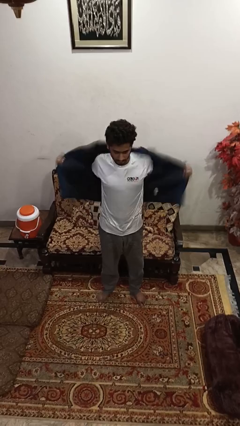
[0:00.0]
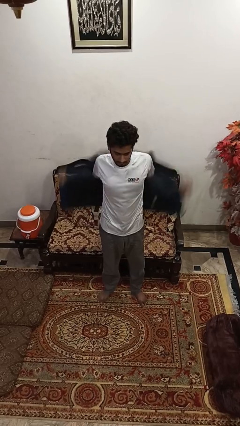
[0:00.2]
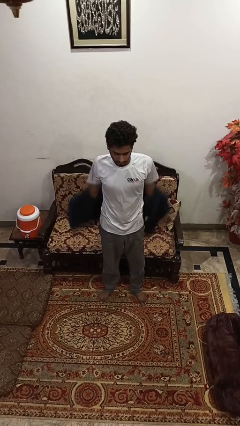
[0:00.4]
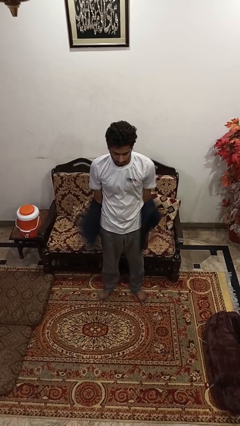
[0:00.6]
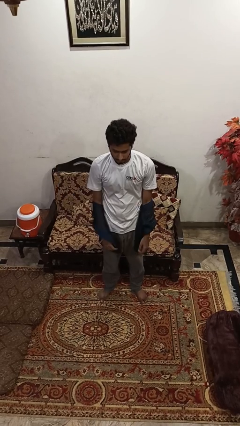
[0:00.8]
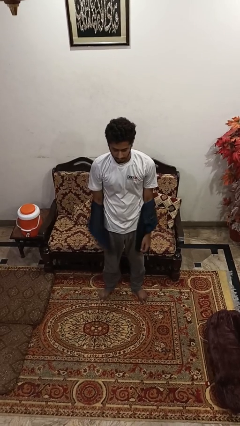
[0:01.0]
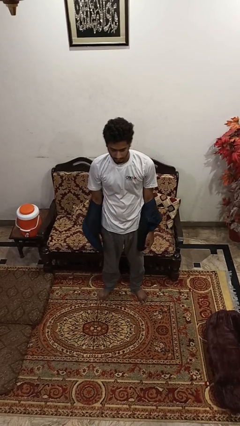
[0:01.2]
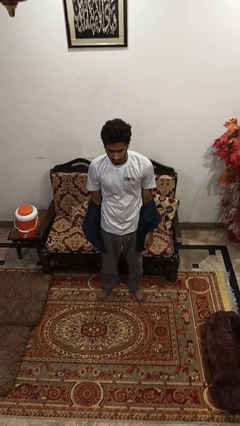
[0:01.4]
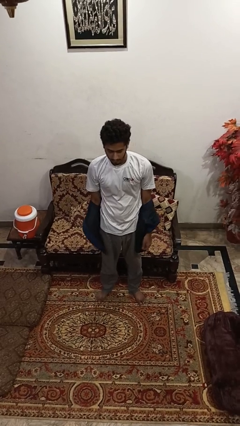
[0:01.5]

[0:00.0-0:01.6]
person takes off jacket

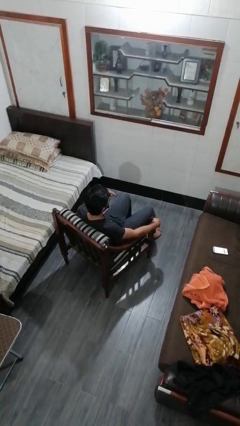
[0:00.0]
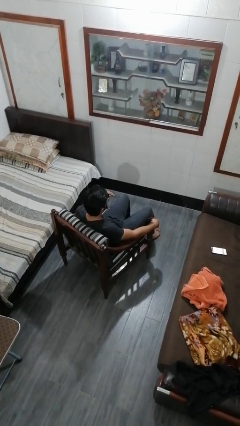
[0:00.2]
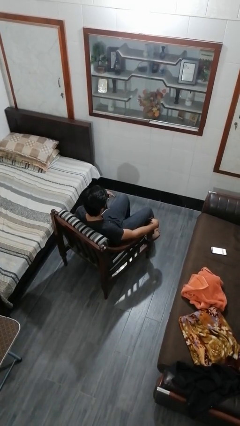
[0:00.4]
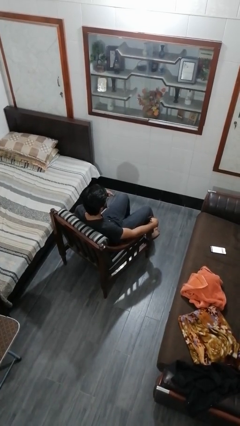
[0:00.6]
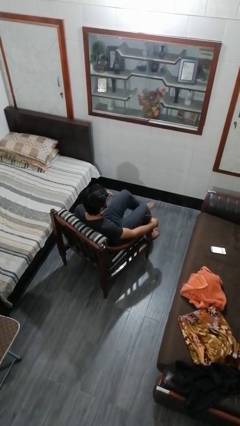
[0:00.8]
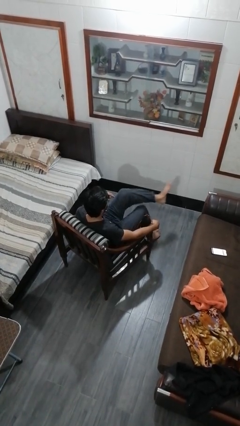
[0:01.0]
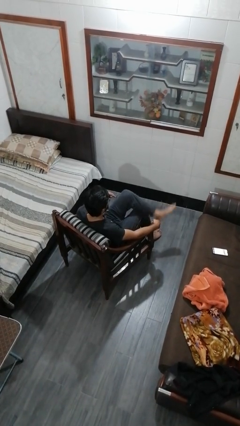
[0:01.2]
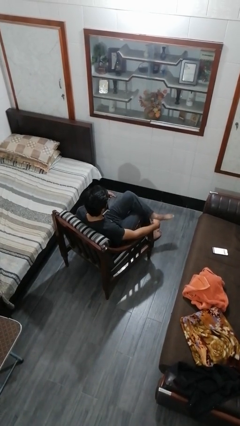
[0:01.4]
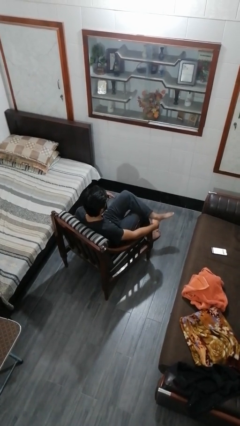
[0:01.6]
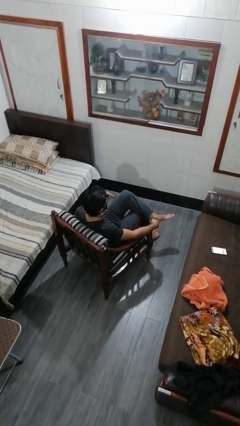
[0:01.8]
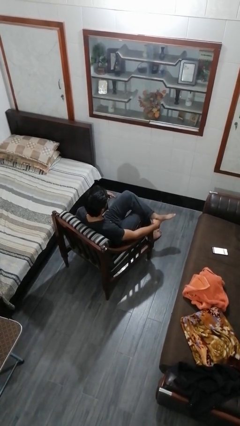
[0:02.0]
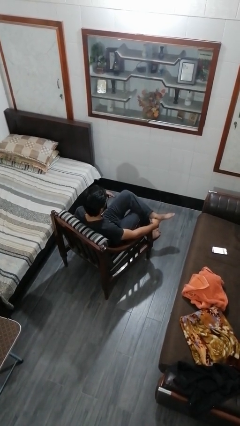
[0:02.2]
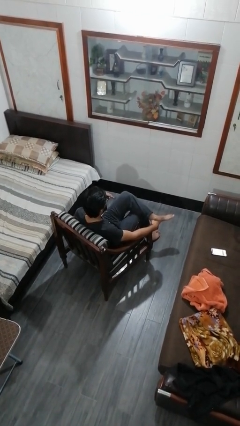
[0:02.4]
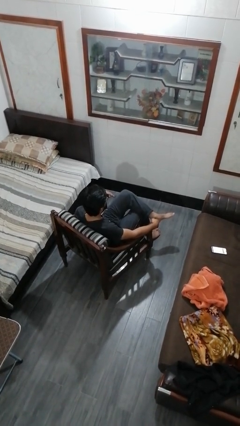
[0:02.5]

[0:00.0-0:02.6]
person crosses legs

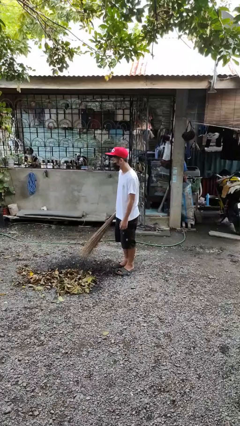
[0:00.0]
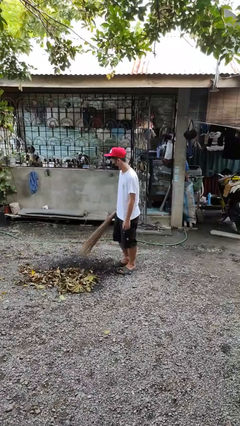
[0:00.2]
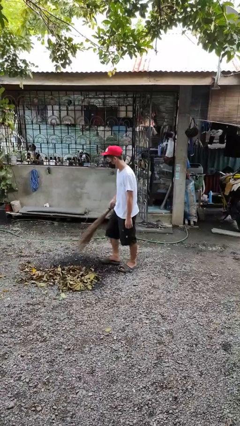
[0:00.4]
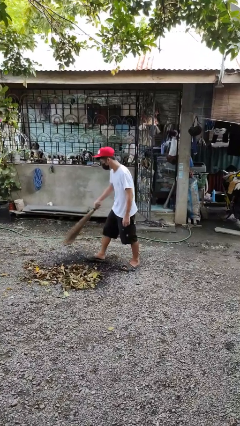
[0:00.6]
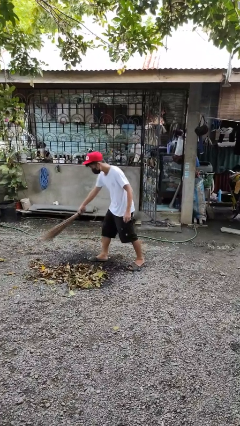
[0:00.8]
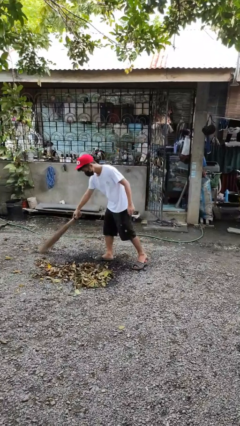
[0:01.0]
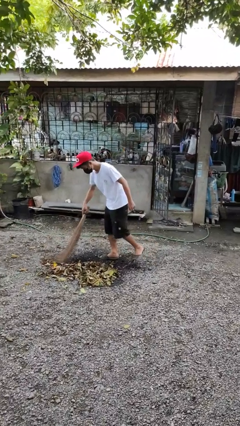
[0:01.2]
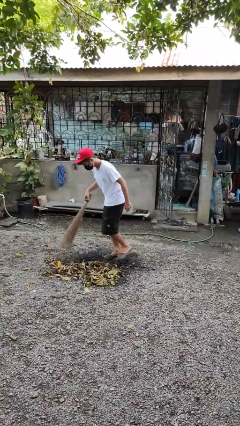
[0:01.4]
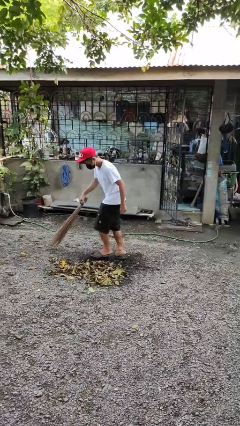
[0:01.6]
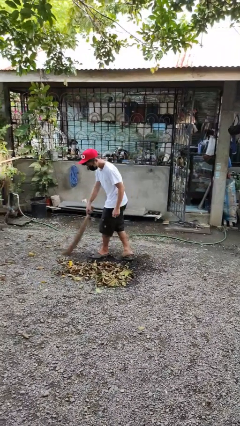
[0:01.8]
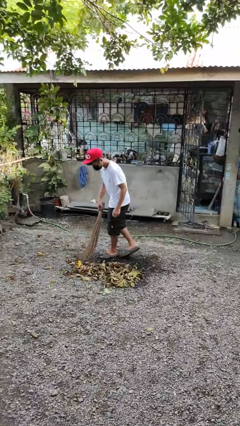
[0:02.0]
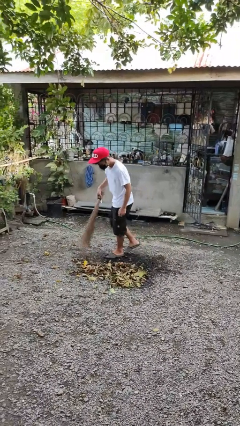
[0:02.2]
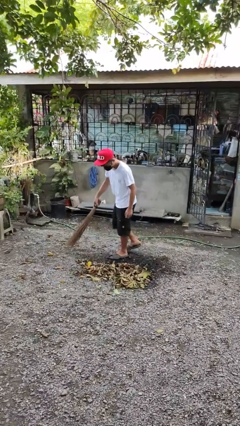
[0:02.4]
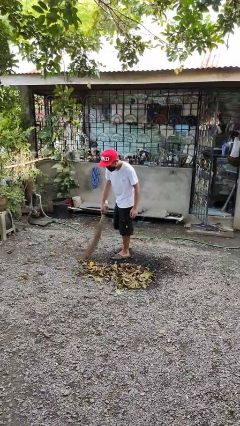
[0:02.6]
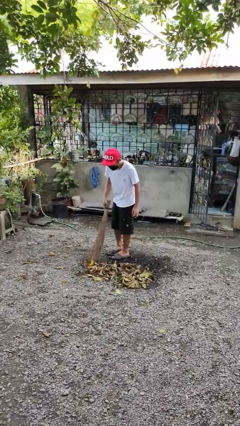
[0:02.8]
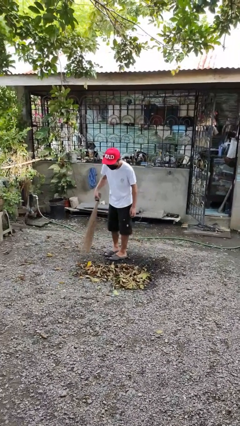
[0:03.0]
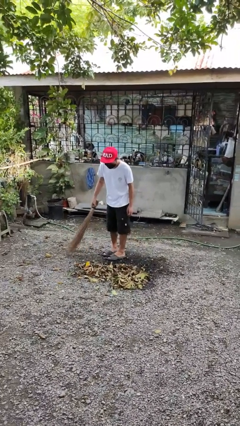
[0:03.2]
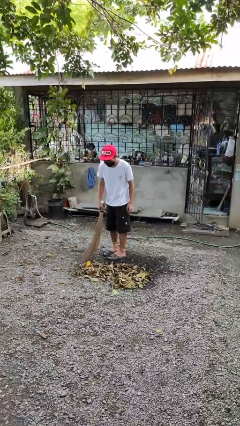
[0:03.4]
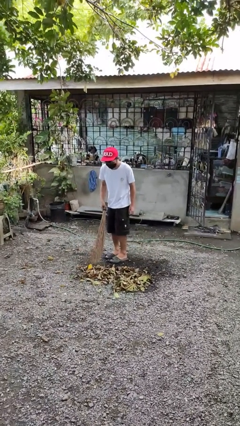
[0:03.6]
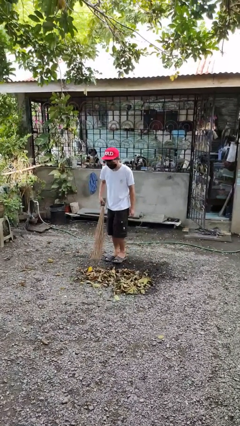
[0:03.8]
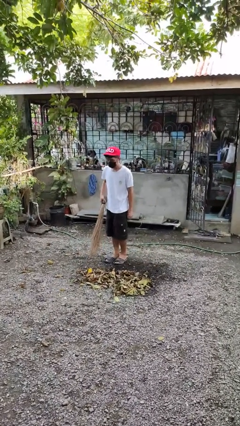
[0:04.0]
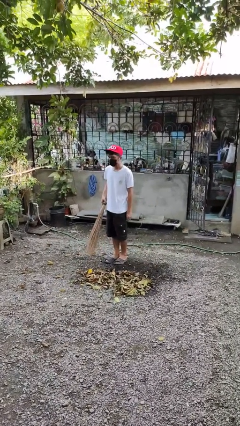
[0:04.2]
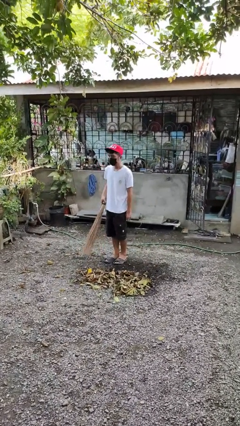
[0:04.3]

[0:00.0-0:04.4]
person sweeps floor

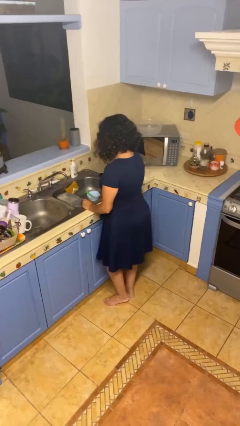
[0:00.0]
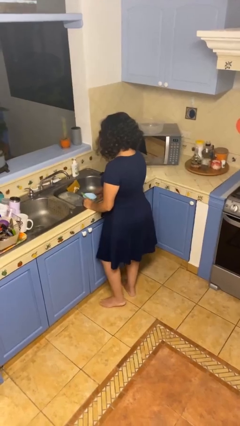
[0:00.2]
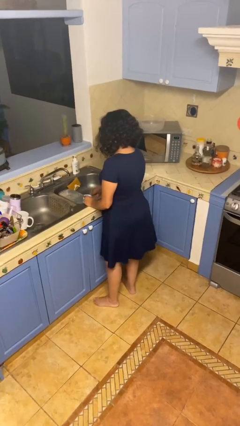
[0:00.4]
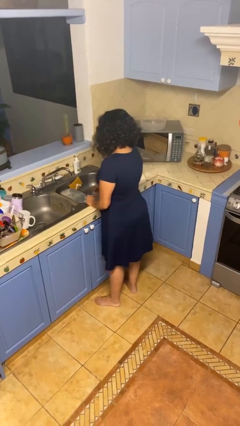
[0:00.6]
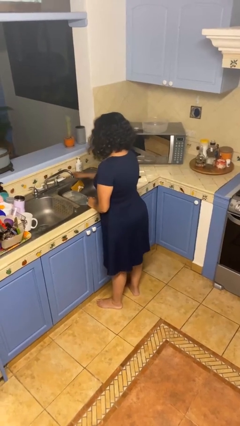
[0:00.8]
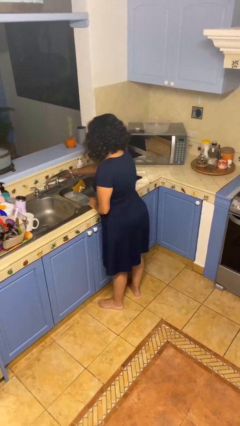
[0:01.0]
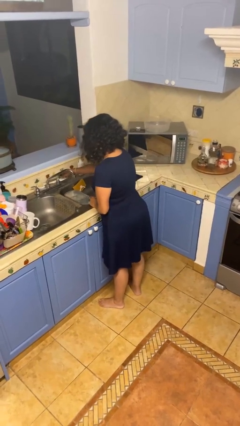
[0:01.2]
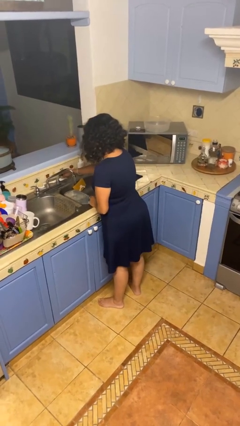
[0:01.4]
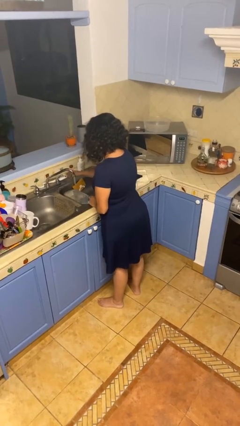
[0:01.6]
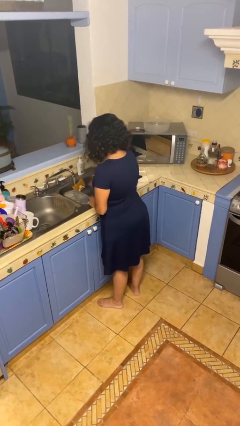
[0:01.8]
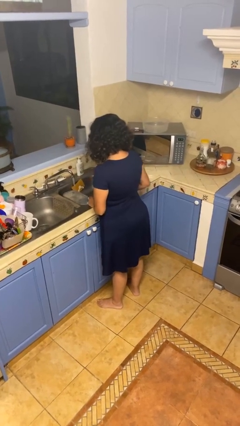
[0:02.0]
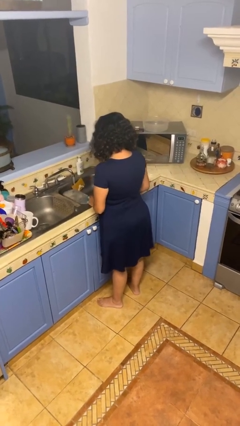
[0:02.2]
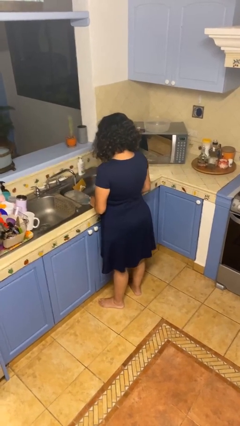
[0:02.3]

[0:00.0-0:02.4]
person turns on faucet

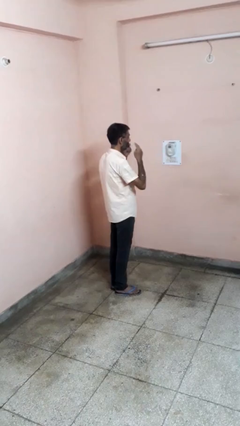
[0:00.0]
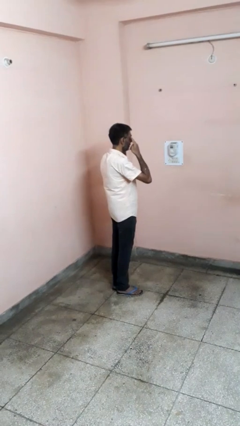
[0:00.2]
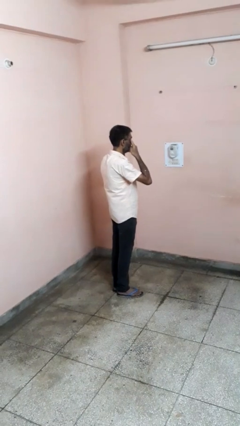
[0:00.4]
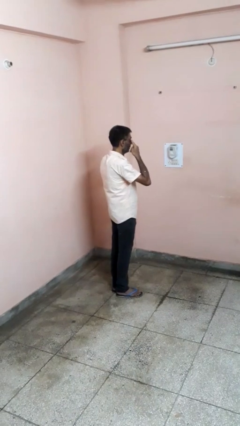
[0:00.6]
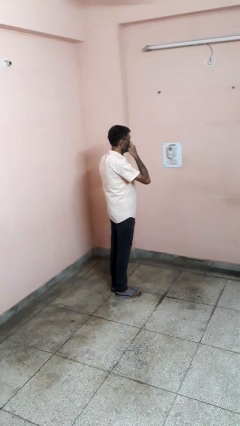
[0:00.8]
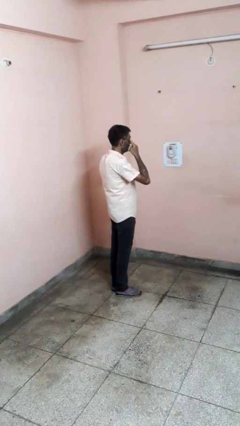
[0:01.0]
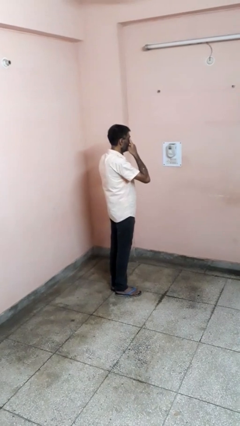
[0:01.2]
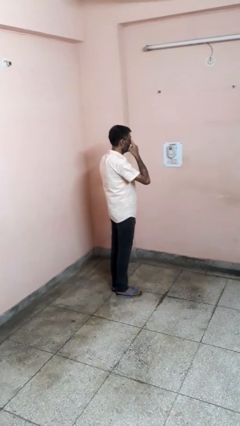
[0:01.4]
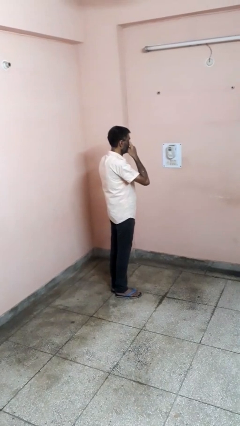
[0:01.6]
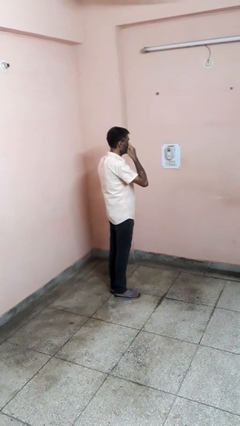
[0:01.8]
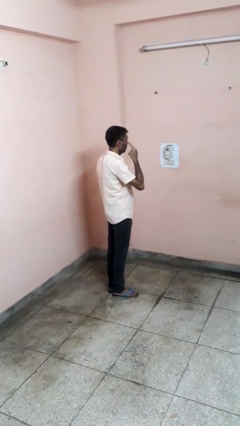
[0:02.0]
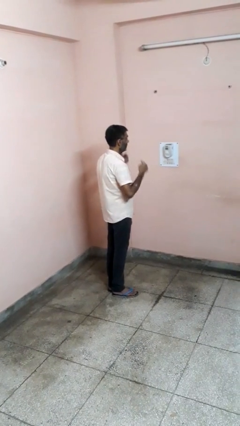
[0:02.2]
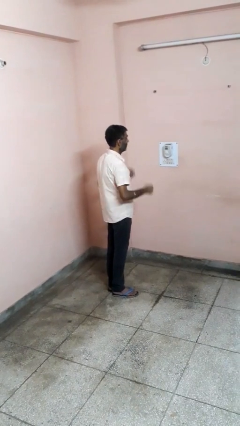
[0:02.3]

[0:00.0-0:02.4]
person rubs eyes

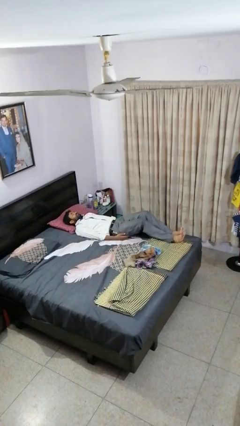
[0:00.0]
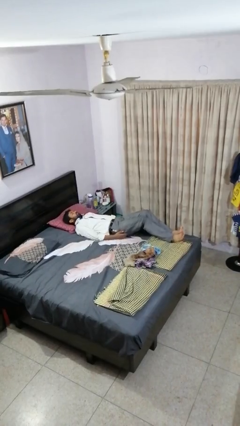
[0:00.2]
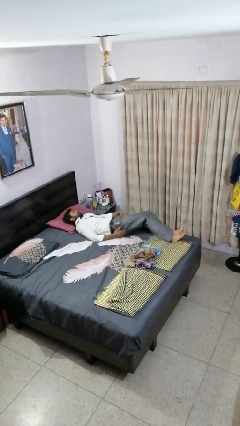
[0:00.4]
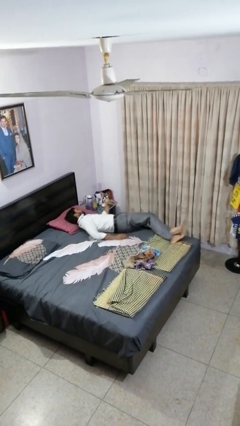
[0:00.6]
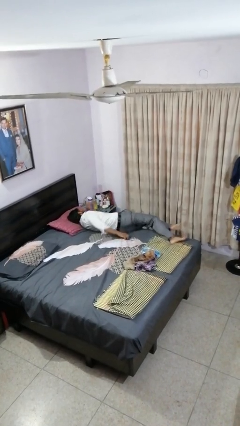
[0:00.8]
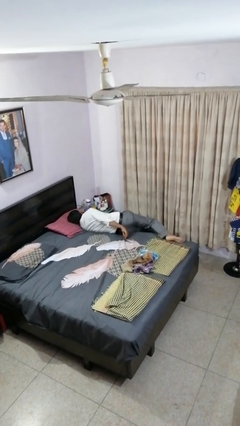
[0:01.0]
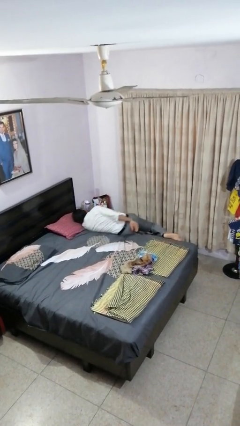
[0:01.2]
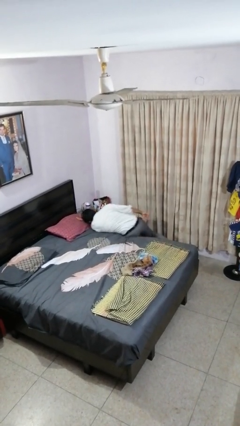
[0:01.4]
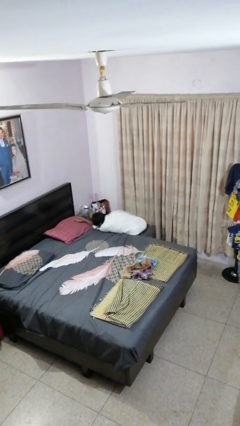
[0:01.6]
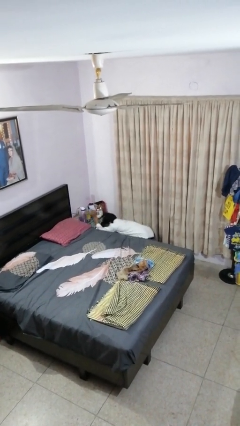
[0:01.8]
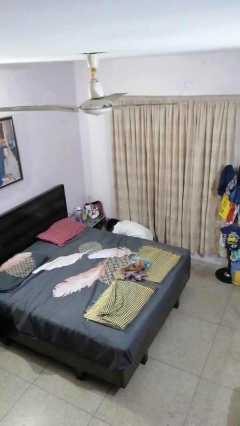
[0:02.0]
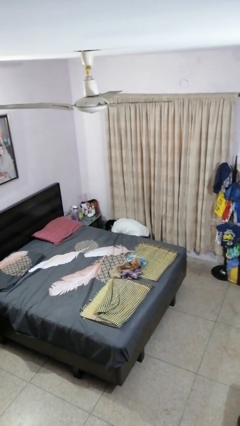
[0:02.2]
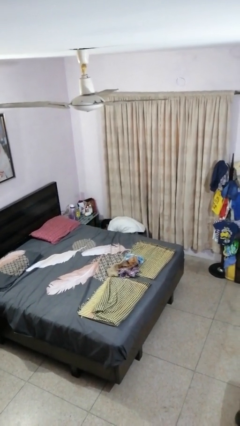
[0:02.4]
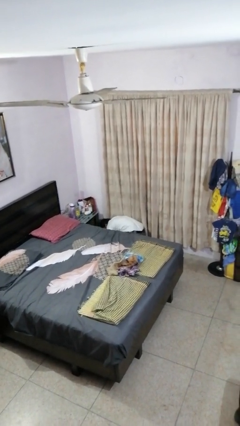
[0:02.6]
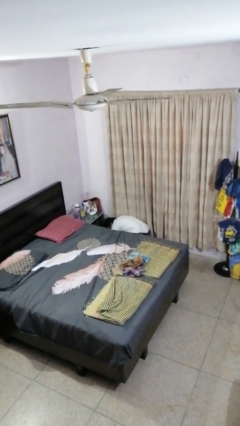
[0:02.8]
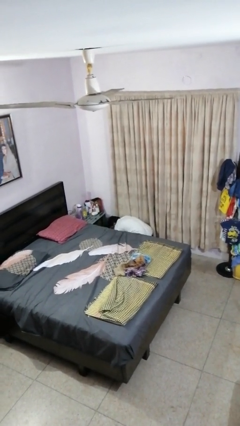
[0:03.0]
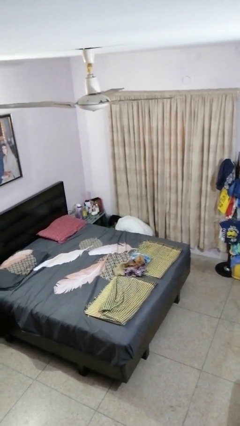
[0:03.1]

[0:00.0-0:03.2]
person falls from bed

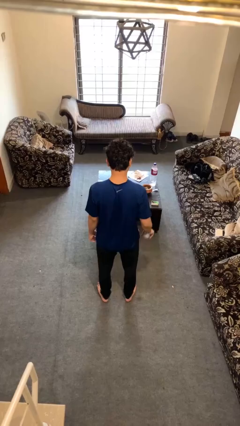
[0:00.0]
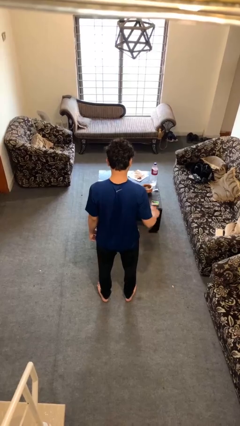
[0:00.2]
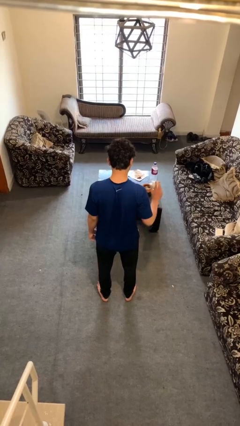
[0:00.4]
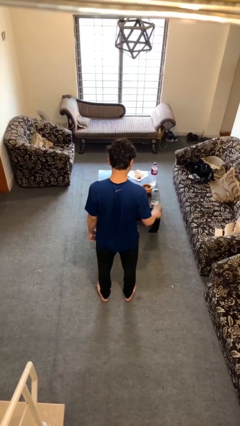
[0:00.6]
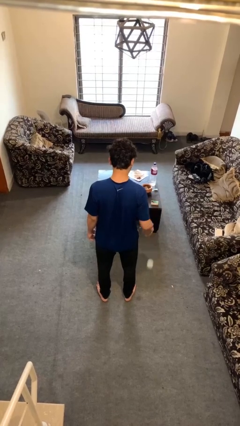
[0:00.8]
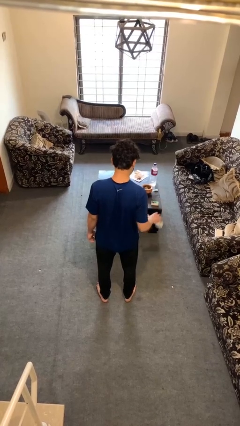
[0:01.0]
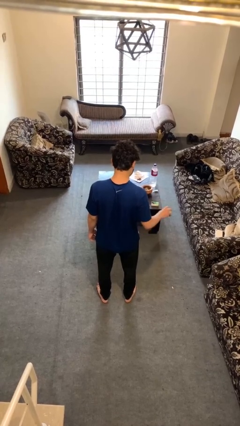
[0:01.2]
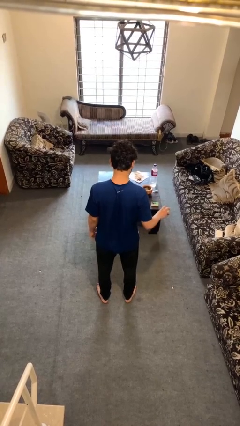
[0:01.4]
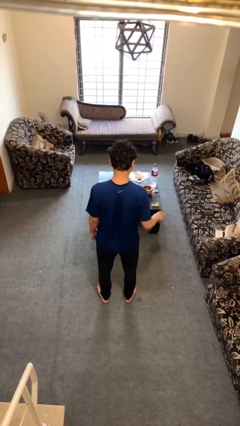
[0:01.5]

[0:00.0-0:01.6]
person bounces ball on floor
